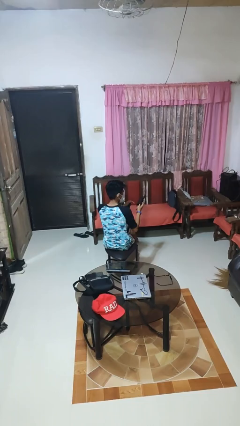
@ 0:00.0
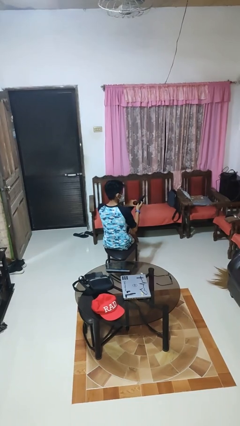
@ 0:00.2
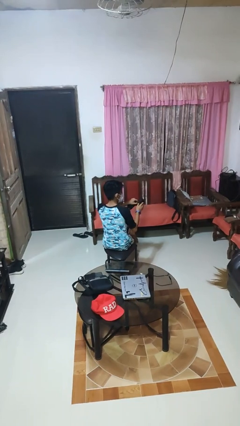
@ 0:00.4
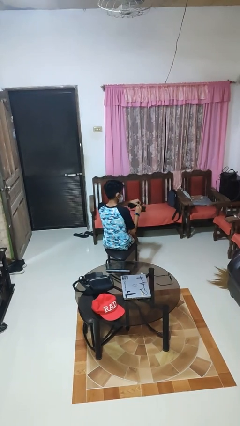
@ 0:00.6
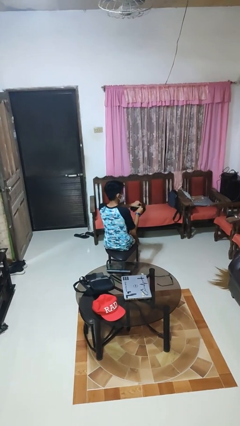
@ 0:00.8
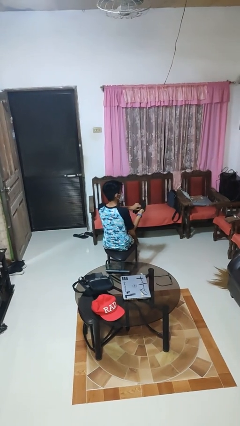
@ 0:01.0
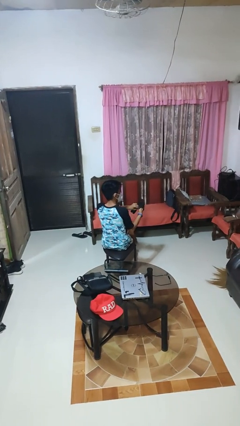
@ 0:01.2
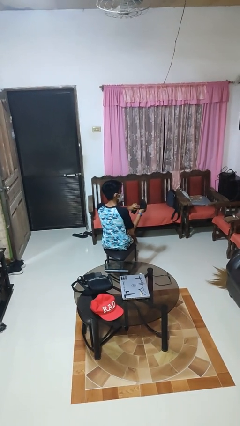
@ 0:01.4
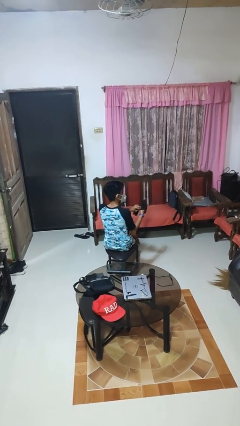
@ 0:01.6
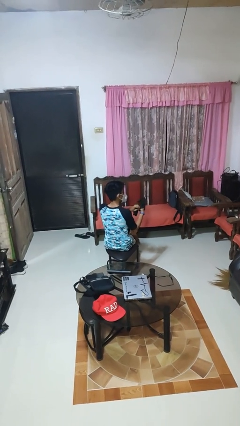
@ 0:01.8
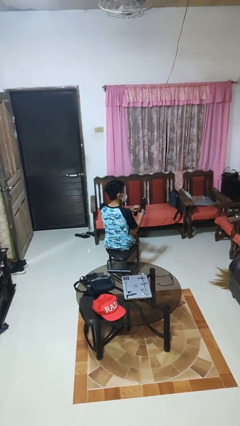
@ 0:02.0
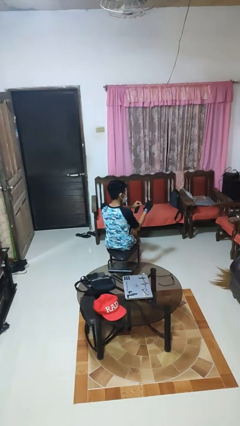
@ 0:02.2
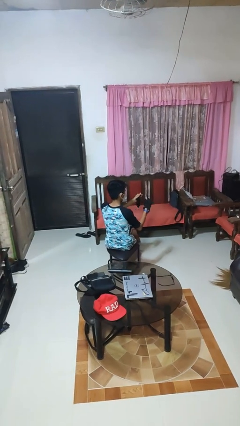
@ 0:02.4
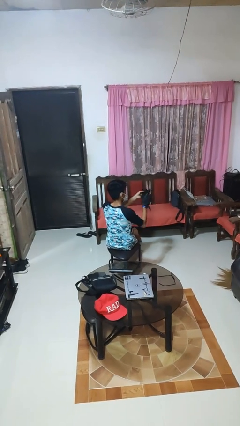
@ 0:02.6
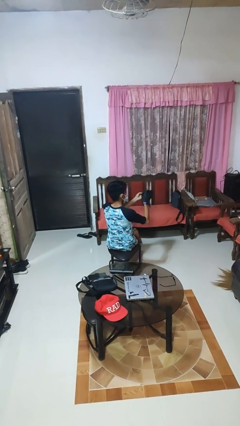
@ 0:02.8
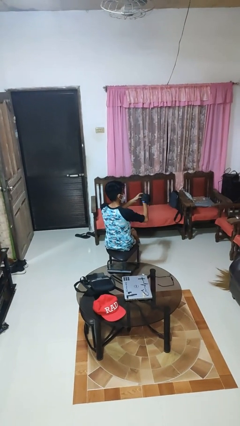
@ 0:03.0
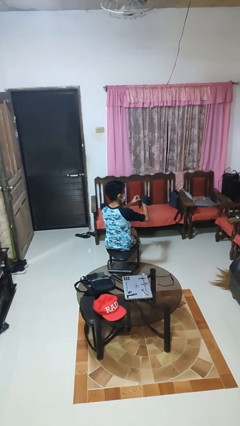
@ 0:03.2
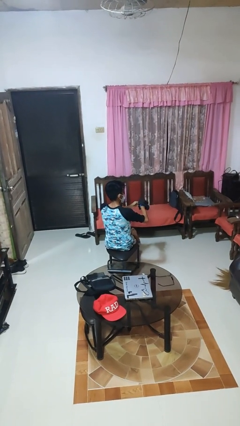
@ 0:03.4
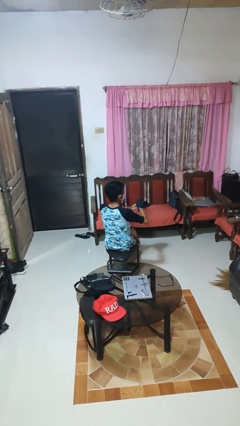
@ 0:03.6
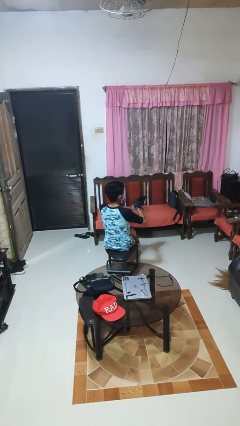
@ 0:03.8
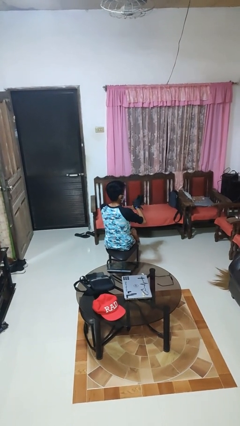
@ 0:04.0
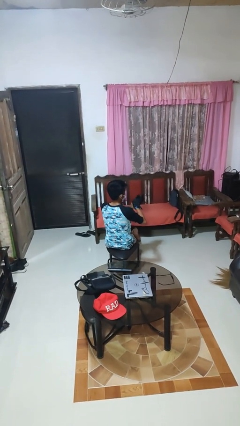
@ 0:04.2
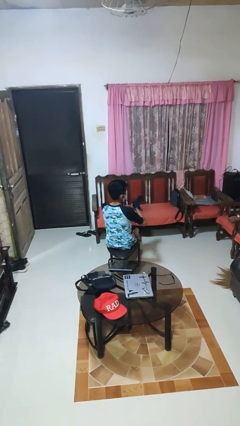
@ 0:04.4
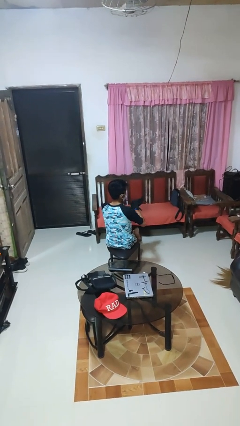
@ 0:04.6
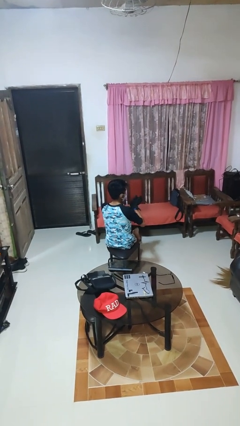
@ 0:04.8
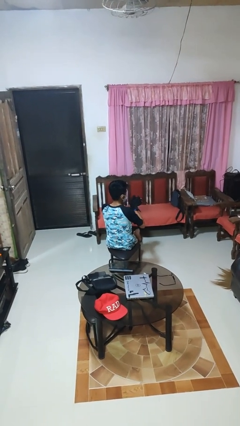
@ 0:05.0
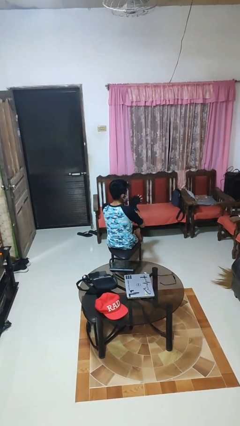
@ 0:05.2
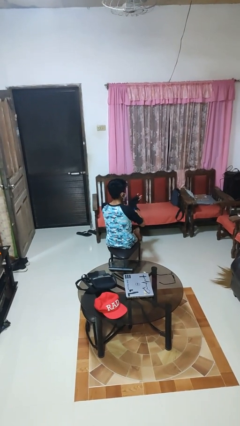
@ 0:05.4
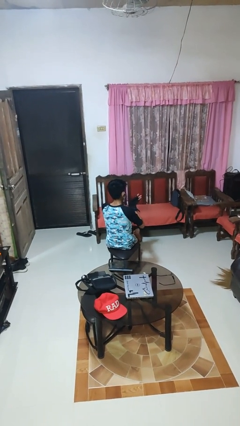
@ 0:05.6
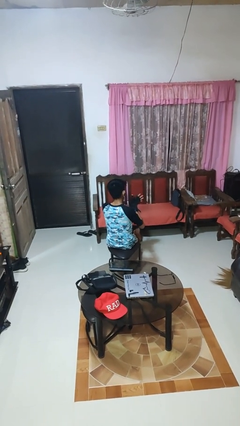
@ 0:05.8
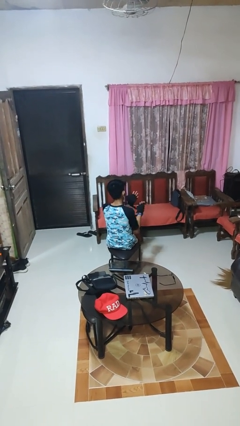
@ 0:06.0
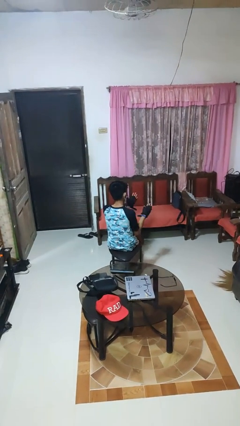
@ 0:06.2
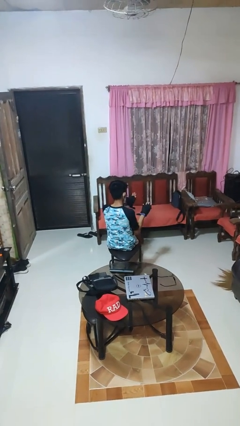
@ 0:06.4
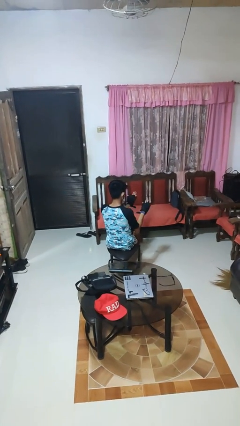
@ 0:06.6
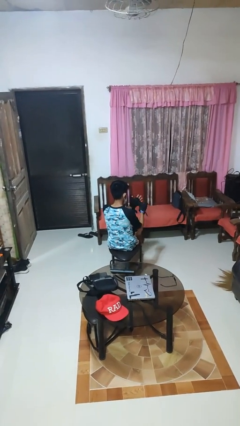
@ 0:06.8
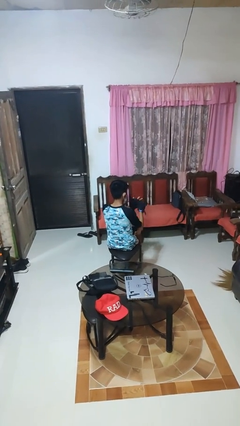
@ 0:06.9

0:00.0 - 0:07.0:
person puts on gloves

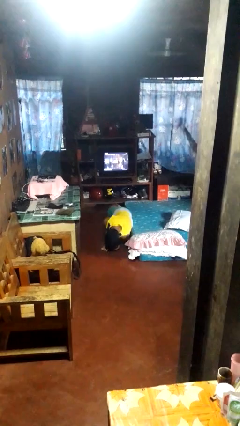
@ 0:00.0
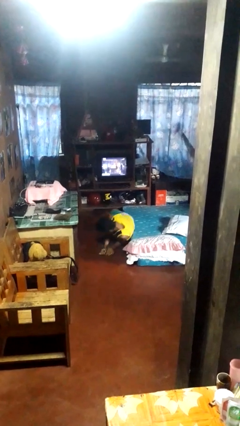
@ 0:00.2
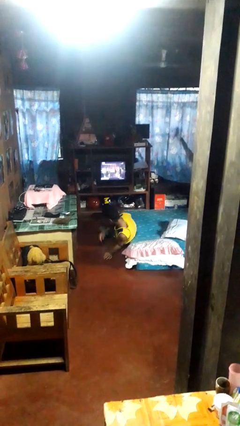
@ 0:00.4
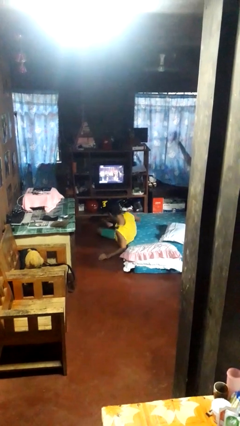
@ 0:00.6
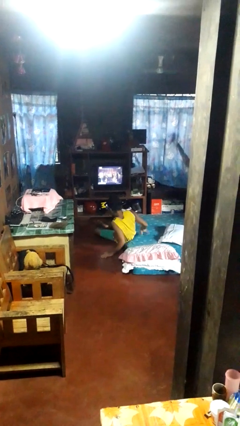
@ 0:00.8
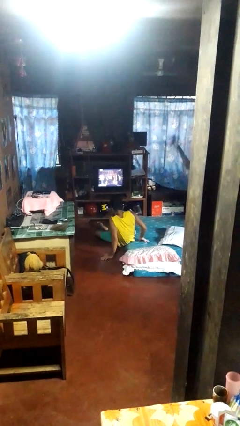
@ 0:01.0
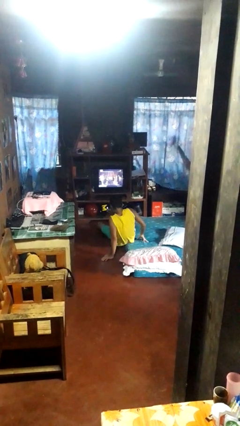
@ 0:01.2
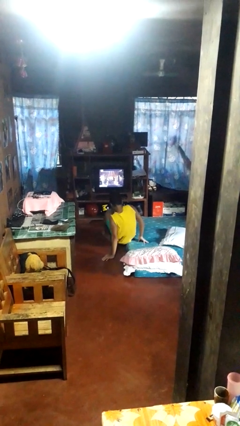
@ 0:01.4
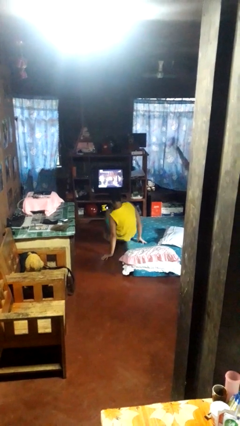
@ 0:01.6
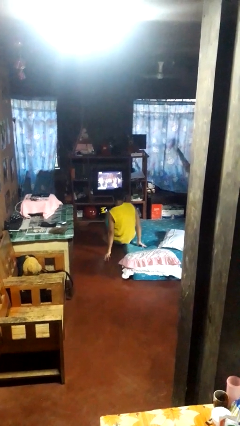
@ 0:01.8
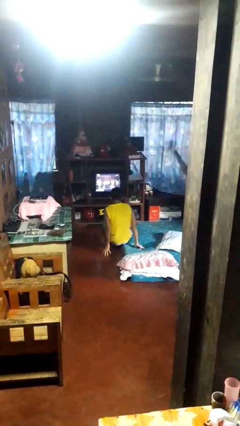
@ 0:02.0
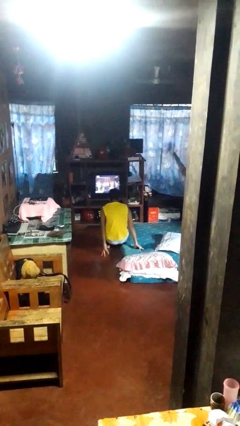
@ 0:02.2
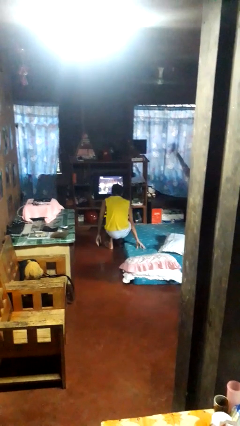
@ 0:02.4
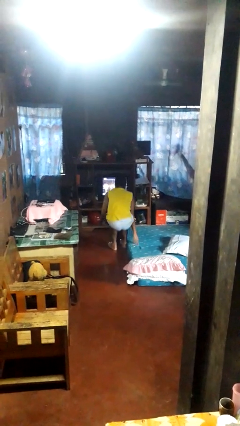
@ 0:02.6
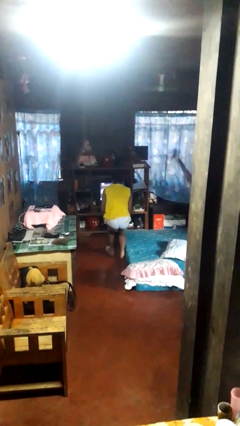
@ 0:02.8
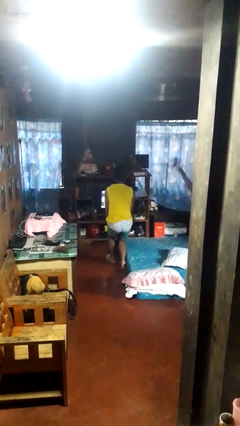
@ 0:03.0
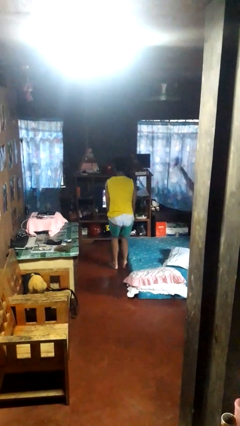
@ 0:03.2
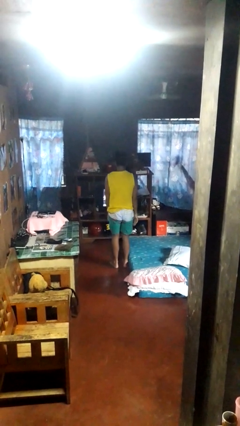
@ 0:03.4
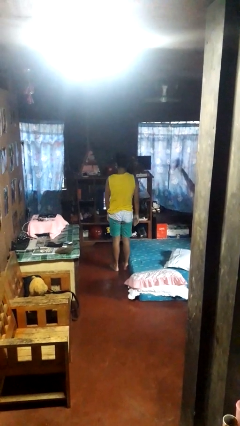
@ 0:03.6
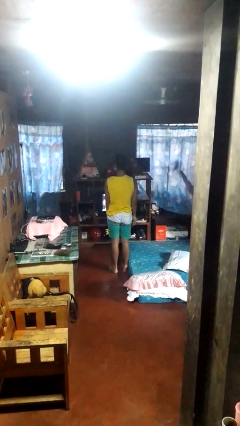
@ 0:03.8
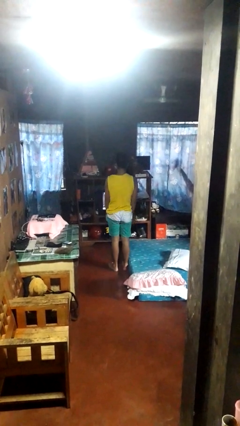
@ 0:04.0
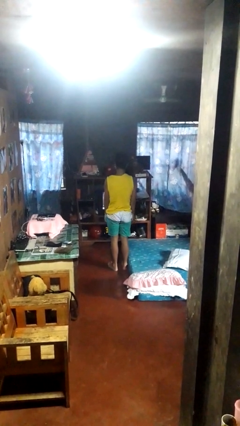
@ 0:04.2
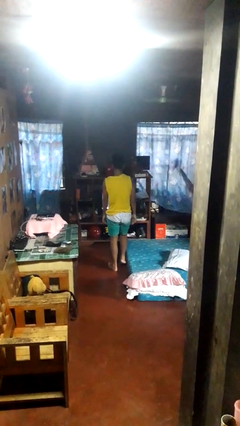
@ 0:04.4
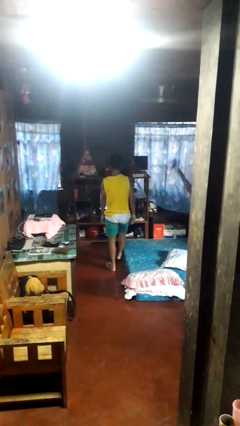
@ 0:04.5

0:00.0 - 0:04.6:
person stands up from floor

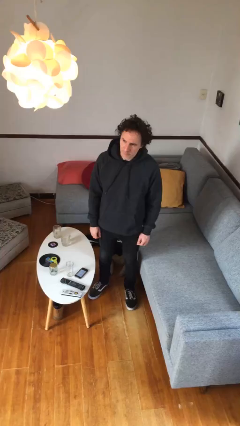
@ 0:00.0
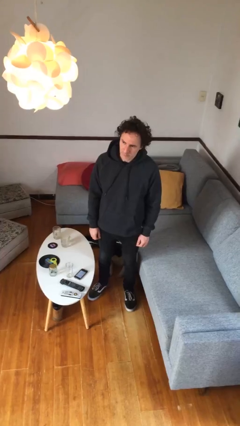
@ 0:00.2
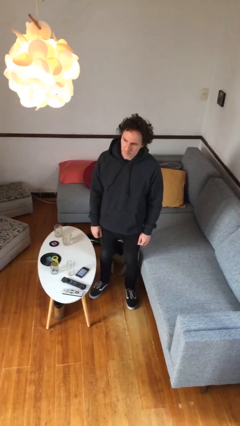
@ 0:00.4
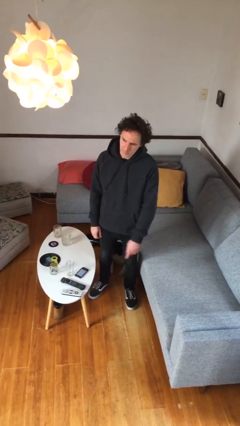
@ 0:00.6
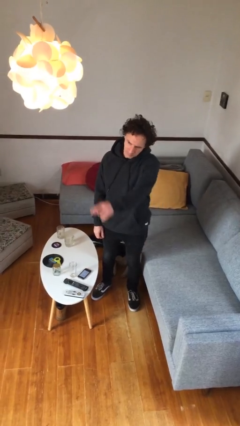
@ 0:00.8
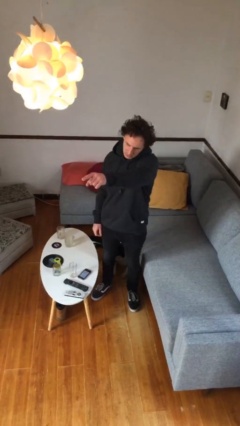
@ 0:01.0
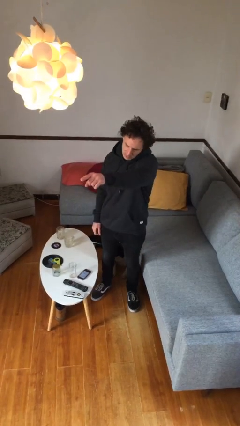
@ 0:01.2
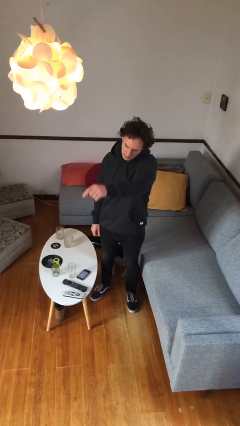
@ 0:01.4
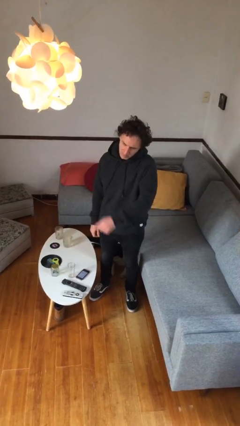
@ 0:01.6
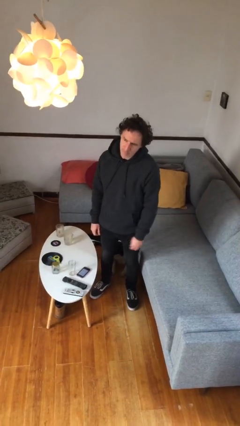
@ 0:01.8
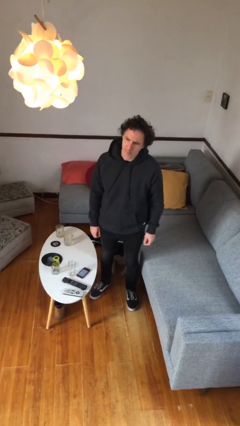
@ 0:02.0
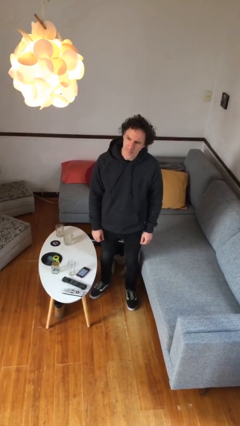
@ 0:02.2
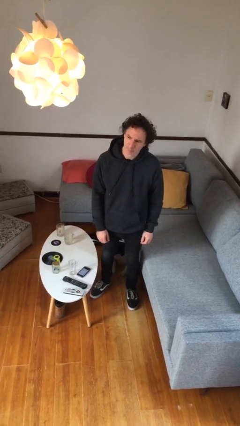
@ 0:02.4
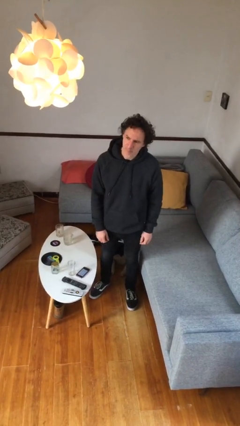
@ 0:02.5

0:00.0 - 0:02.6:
person points at person

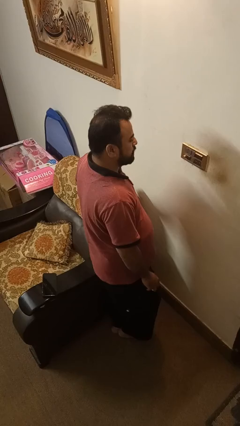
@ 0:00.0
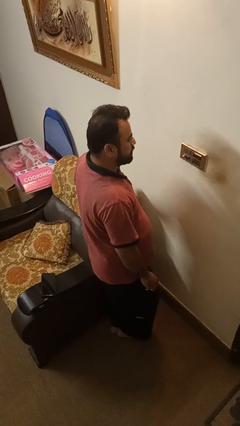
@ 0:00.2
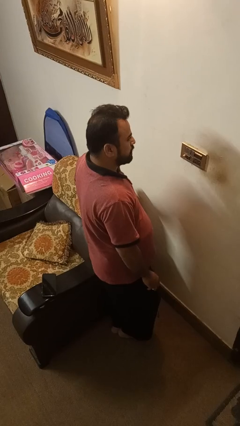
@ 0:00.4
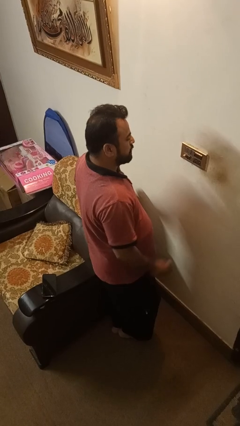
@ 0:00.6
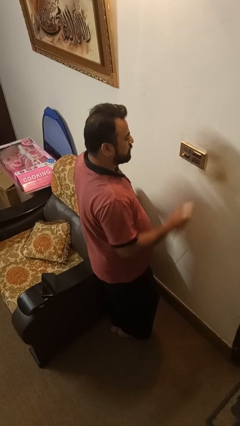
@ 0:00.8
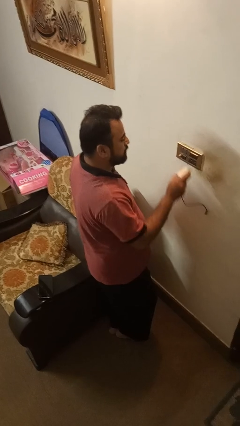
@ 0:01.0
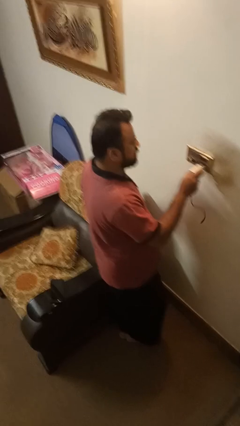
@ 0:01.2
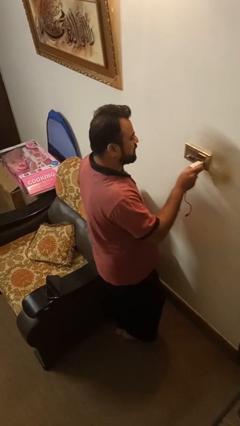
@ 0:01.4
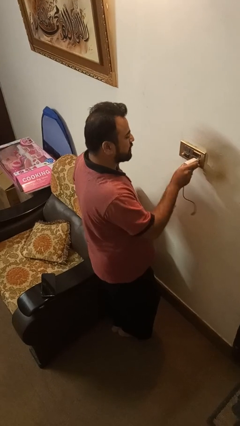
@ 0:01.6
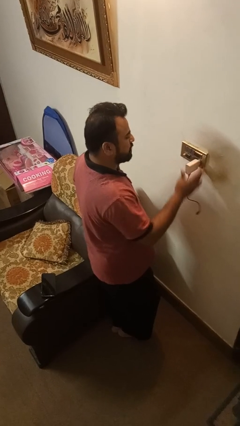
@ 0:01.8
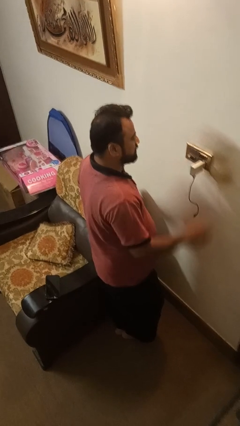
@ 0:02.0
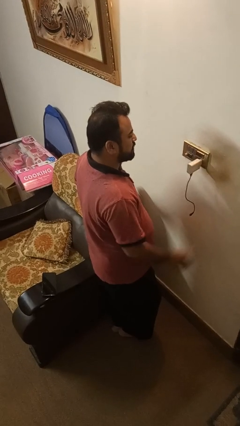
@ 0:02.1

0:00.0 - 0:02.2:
person plugs into electrical socket

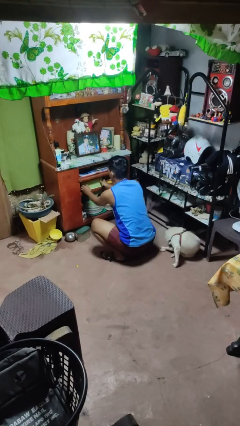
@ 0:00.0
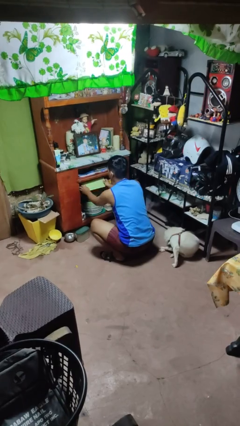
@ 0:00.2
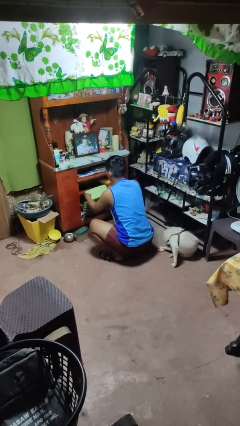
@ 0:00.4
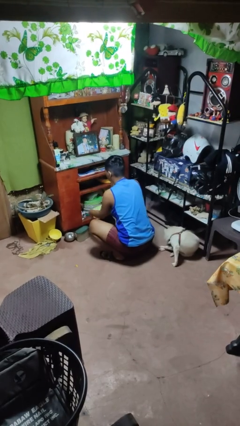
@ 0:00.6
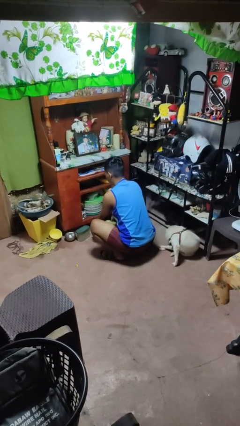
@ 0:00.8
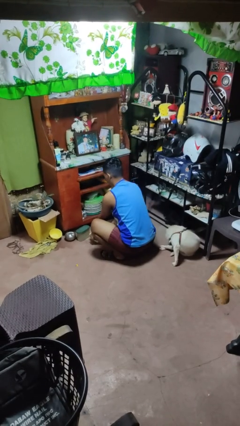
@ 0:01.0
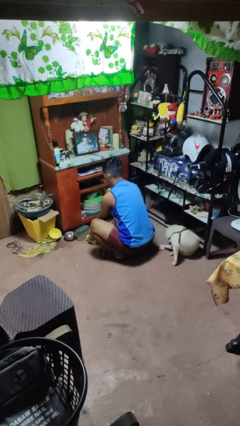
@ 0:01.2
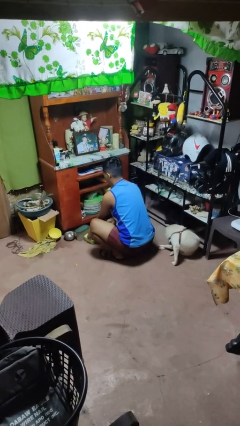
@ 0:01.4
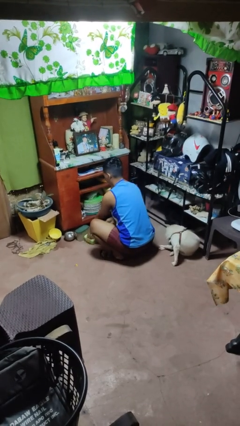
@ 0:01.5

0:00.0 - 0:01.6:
person takes object from cabinet
